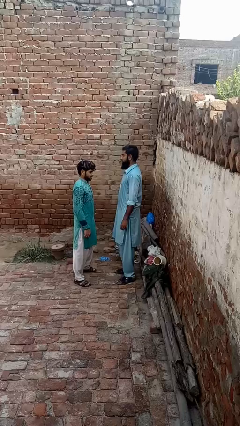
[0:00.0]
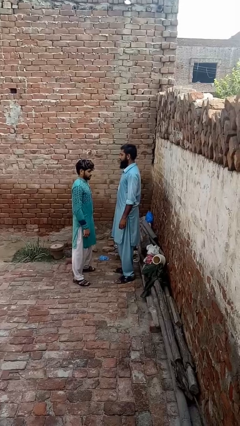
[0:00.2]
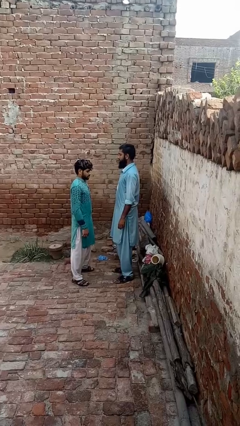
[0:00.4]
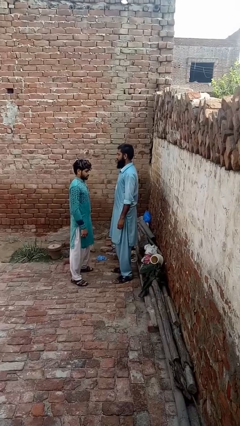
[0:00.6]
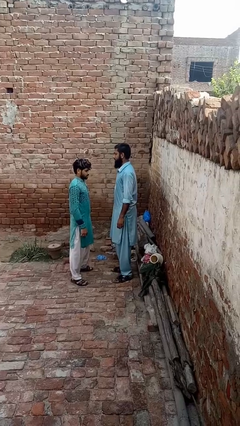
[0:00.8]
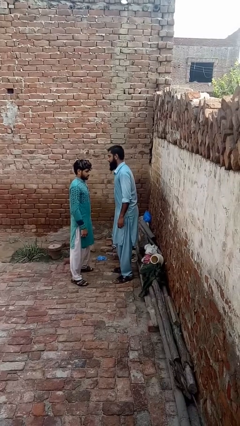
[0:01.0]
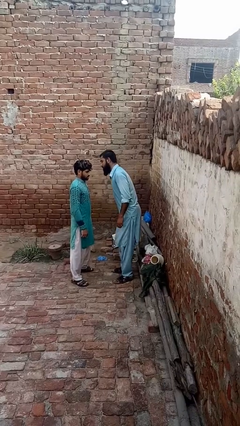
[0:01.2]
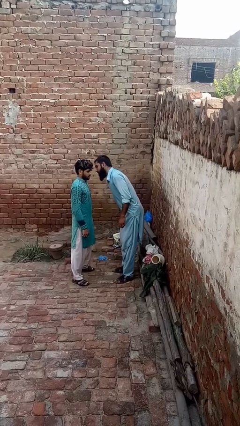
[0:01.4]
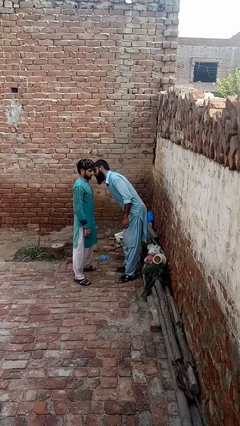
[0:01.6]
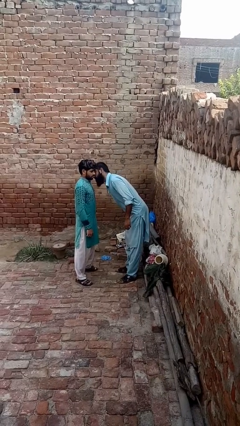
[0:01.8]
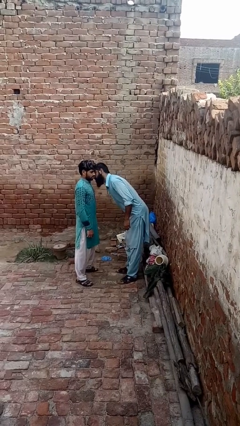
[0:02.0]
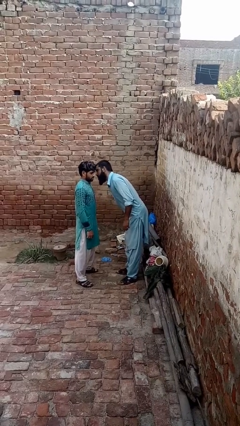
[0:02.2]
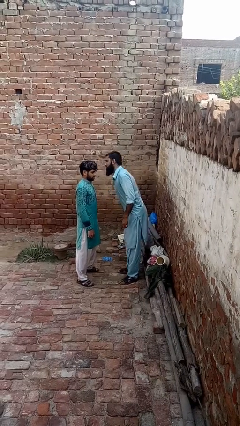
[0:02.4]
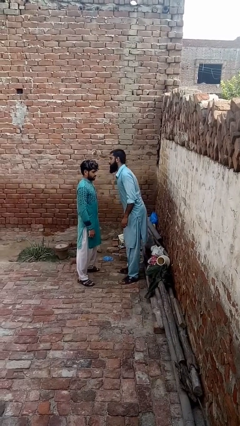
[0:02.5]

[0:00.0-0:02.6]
person kisses cheek of person

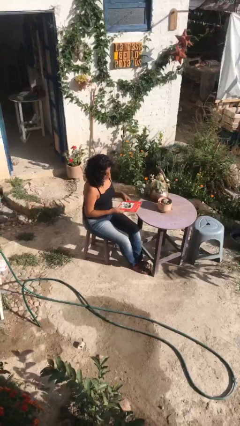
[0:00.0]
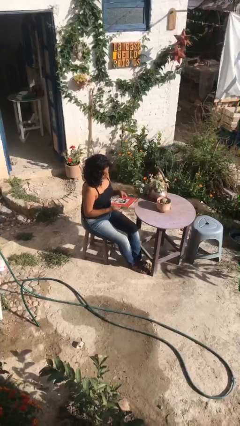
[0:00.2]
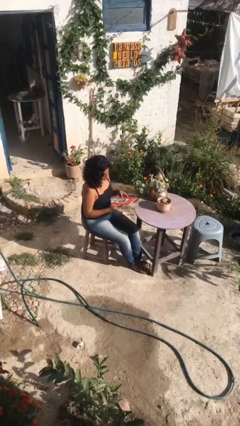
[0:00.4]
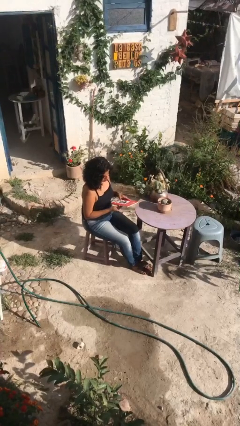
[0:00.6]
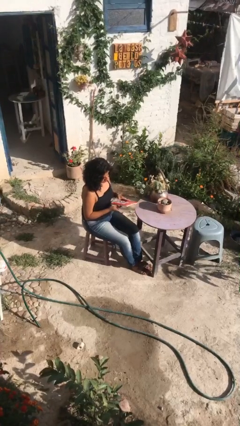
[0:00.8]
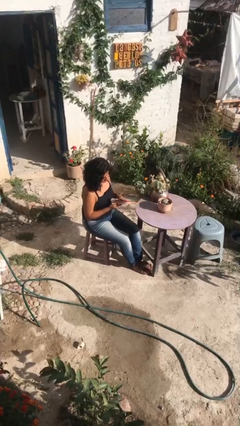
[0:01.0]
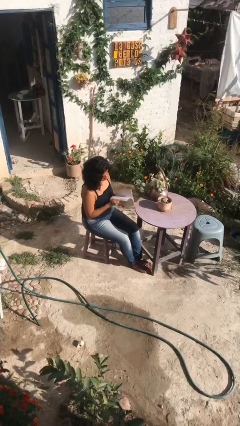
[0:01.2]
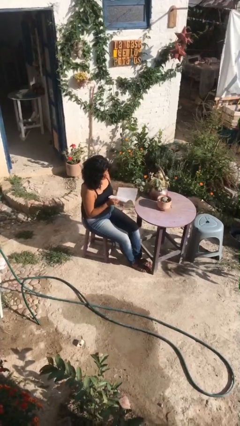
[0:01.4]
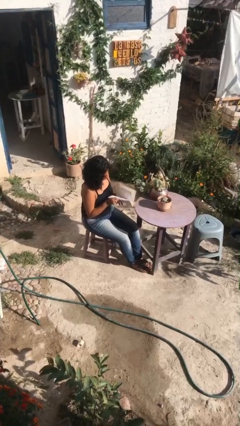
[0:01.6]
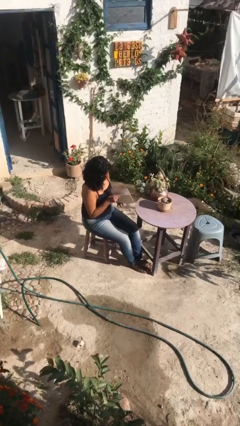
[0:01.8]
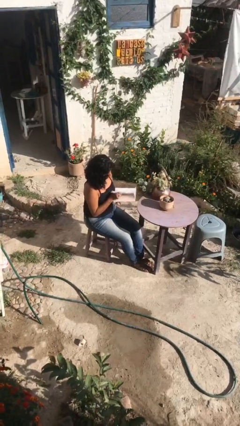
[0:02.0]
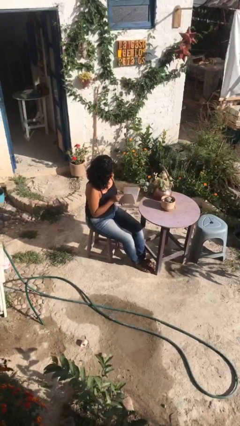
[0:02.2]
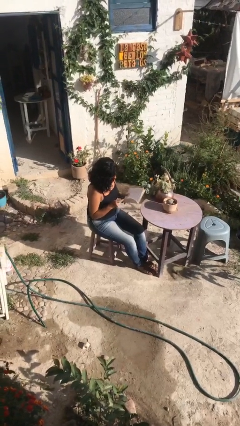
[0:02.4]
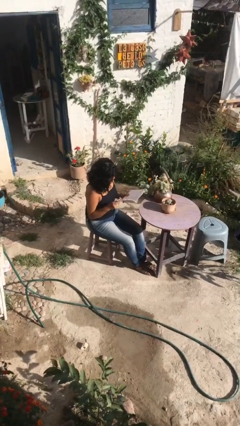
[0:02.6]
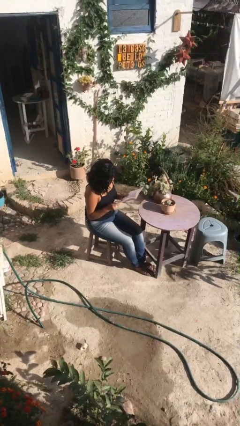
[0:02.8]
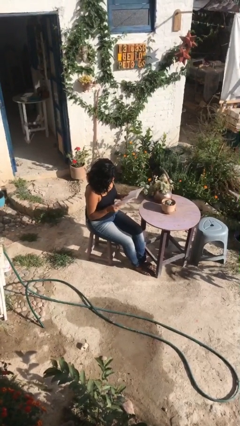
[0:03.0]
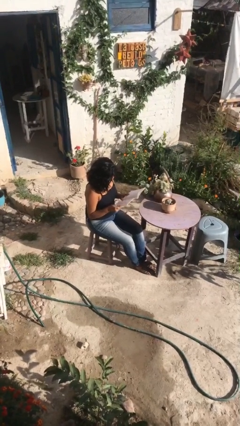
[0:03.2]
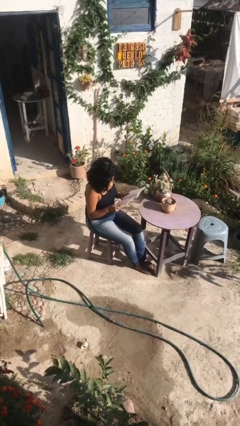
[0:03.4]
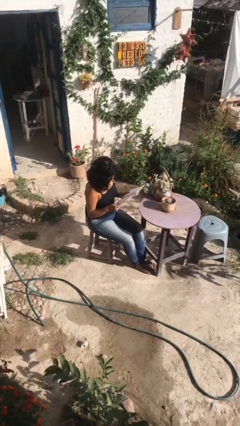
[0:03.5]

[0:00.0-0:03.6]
person reads document

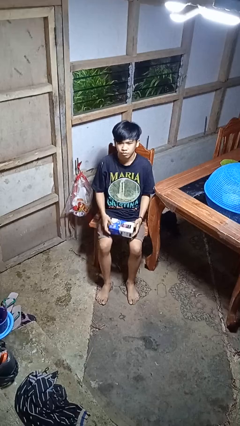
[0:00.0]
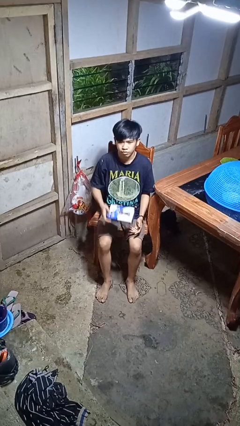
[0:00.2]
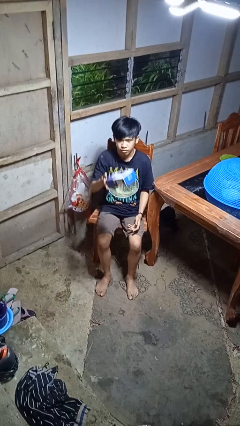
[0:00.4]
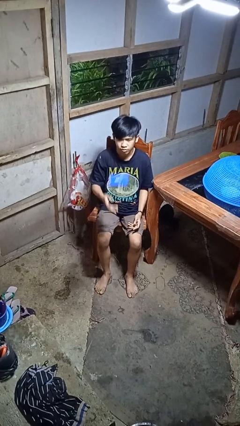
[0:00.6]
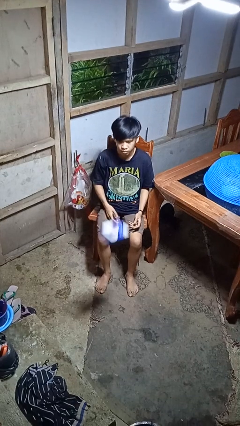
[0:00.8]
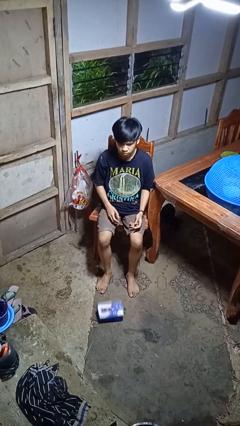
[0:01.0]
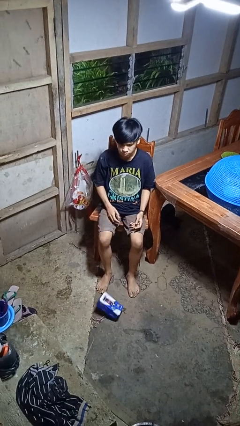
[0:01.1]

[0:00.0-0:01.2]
person throws object into air

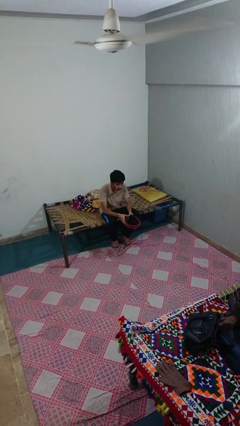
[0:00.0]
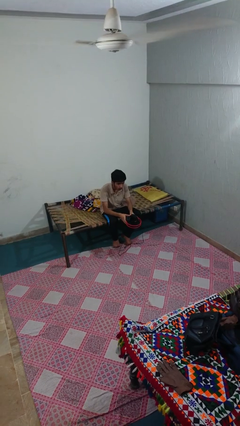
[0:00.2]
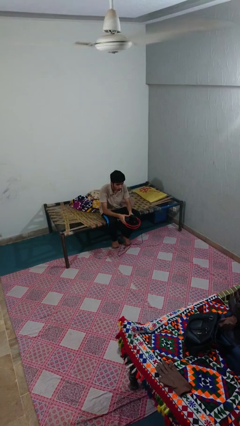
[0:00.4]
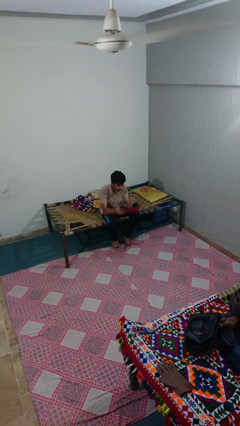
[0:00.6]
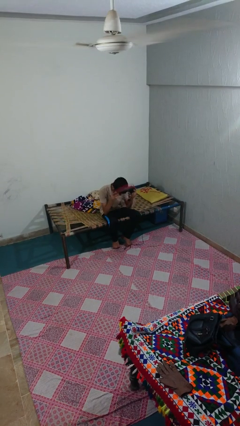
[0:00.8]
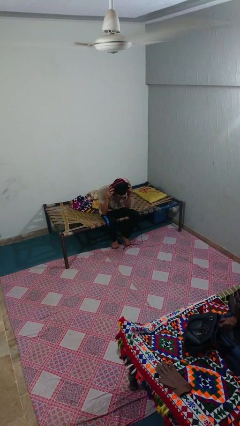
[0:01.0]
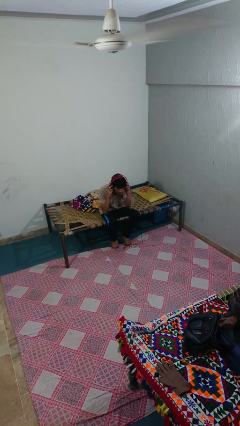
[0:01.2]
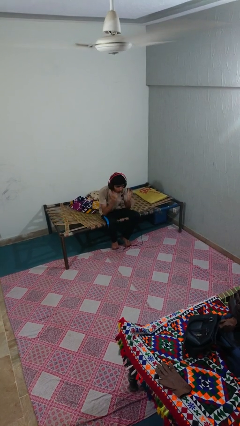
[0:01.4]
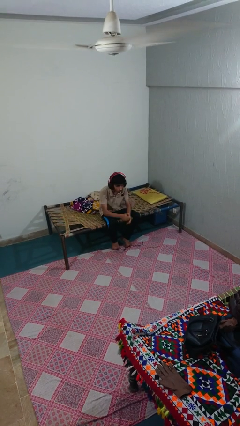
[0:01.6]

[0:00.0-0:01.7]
person puts on headphones

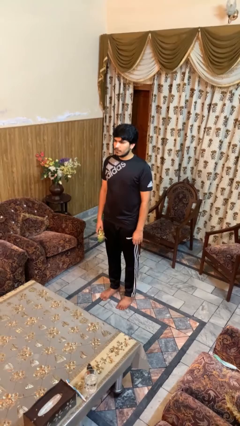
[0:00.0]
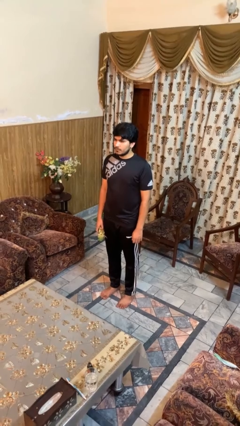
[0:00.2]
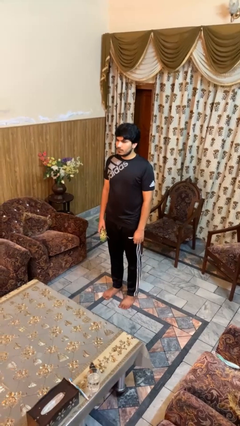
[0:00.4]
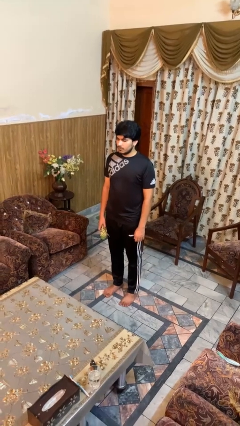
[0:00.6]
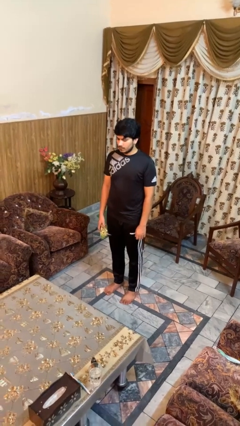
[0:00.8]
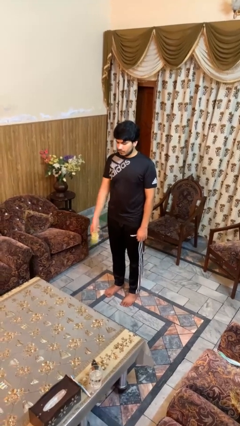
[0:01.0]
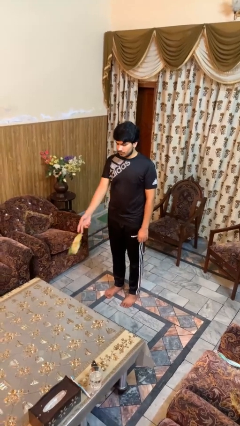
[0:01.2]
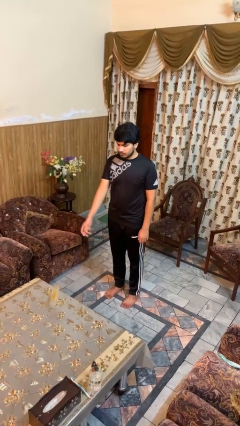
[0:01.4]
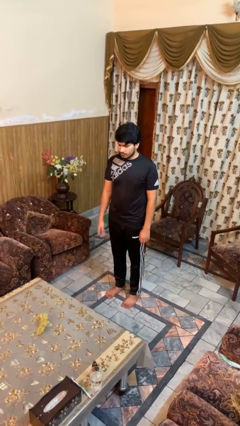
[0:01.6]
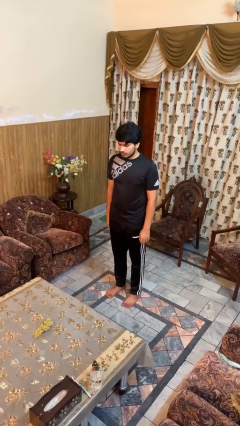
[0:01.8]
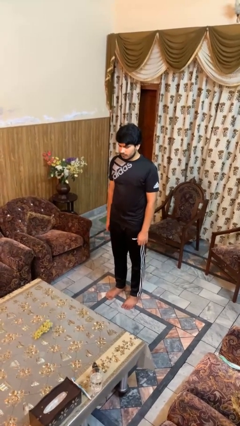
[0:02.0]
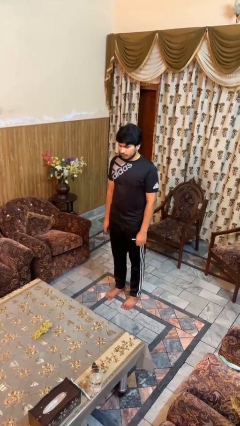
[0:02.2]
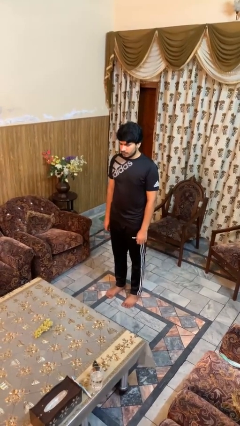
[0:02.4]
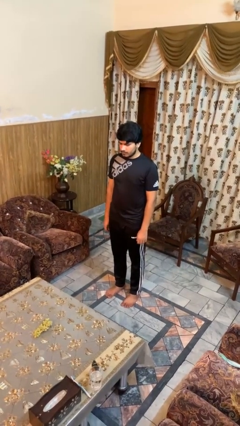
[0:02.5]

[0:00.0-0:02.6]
person throws object on table

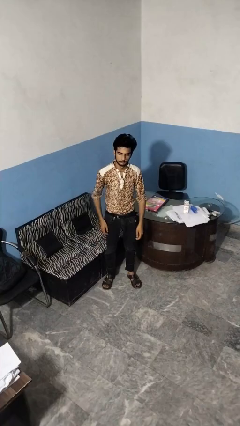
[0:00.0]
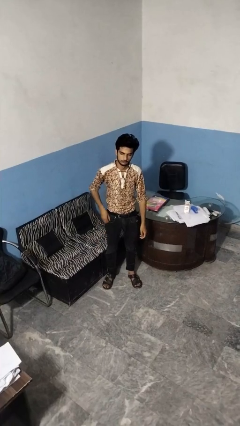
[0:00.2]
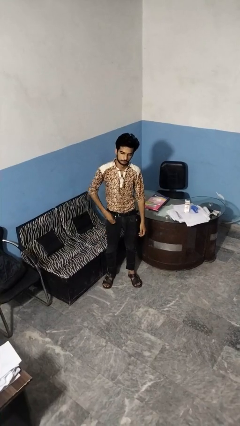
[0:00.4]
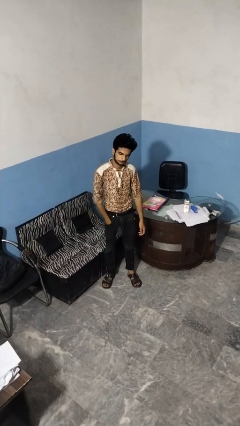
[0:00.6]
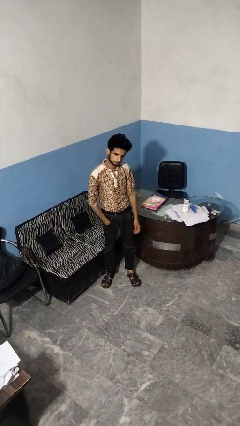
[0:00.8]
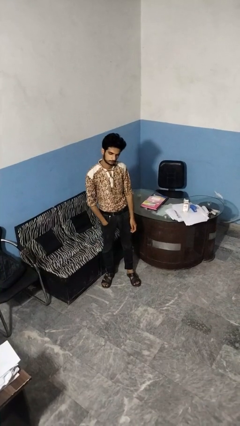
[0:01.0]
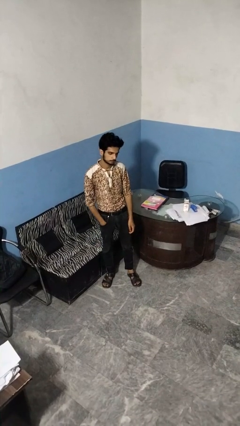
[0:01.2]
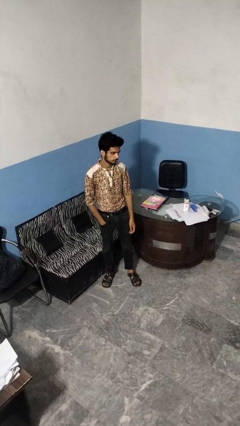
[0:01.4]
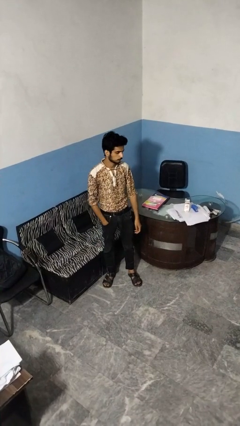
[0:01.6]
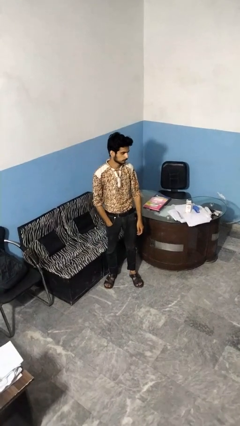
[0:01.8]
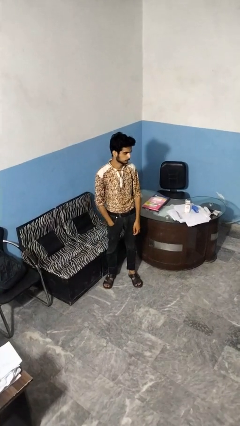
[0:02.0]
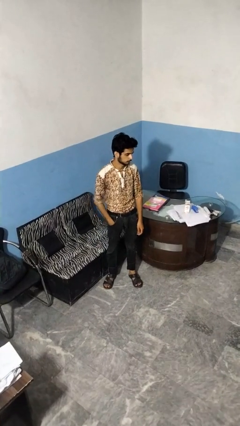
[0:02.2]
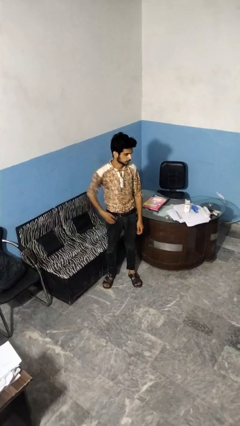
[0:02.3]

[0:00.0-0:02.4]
person puts hands in back pockets

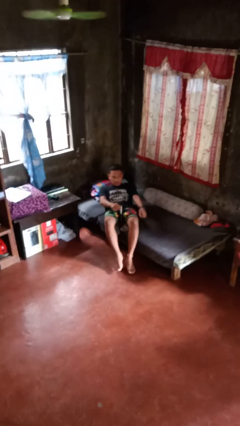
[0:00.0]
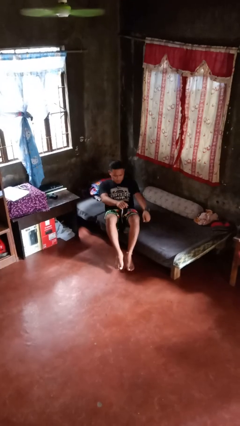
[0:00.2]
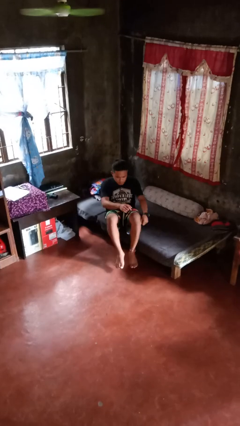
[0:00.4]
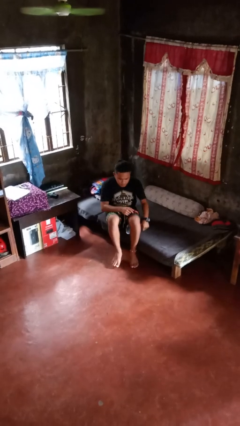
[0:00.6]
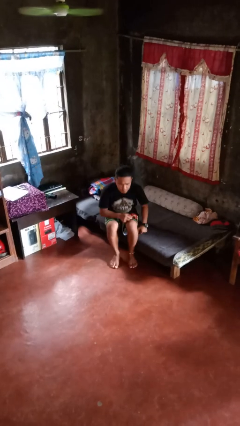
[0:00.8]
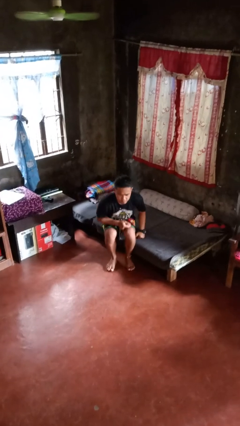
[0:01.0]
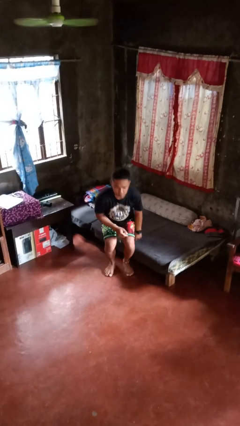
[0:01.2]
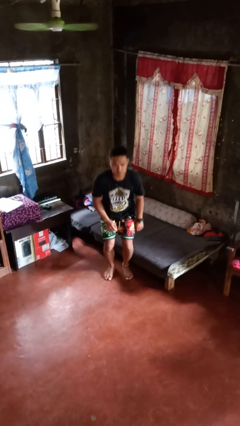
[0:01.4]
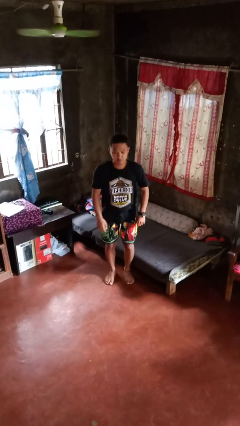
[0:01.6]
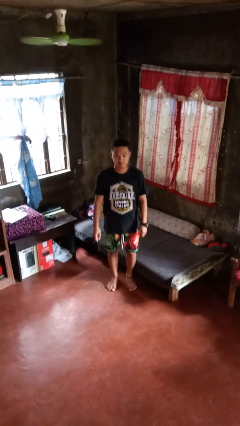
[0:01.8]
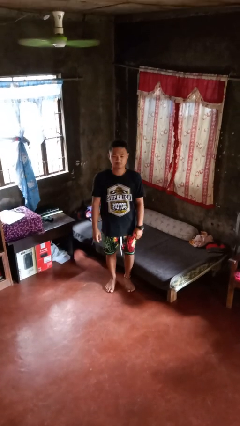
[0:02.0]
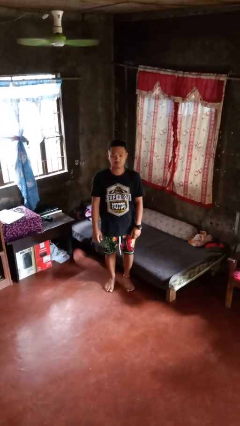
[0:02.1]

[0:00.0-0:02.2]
person stands up

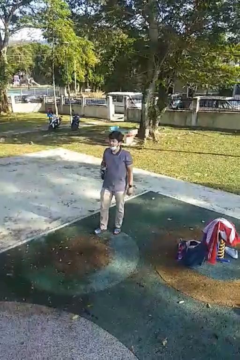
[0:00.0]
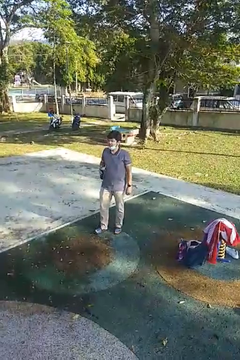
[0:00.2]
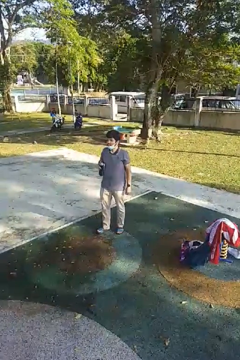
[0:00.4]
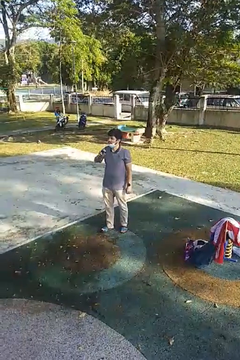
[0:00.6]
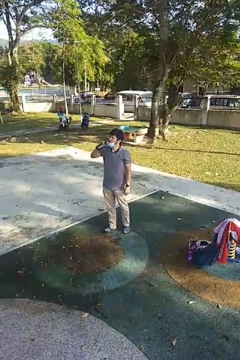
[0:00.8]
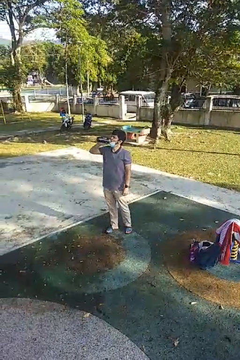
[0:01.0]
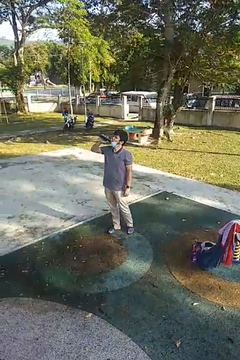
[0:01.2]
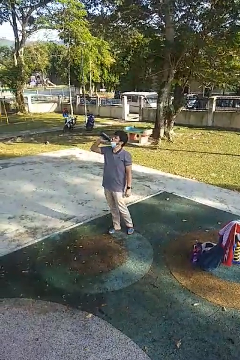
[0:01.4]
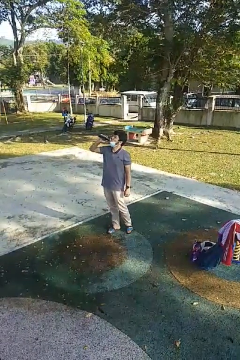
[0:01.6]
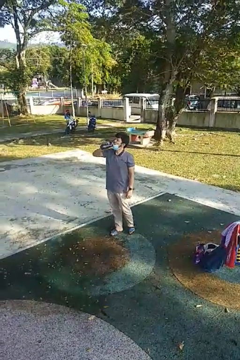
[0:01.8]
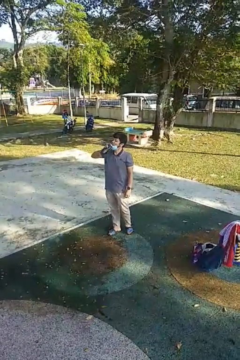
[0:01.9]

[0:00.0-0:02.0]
person drinks from bottle
